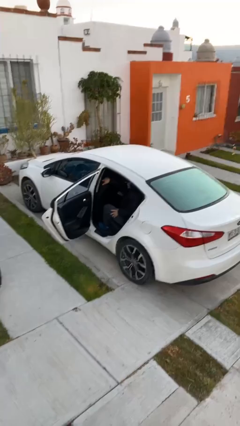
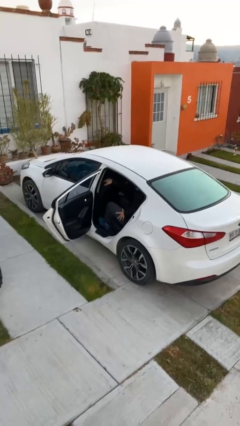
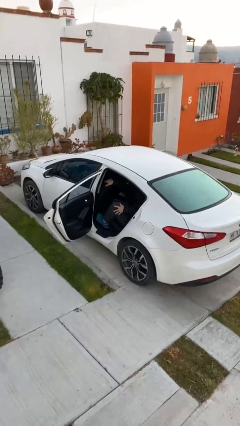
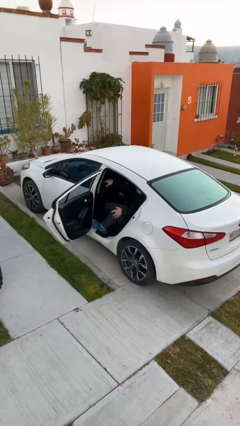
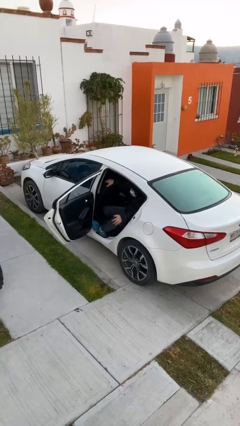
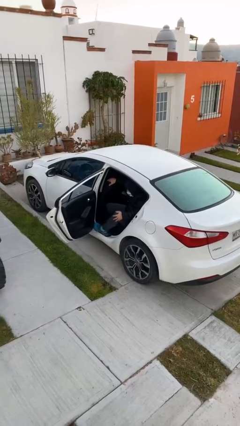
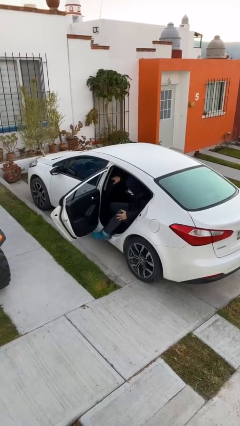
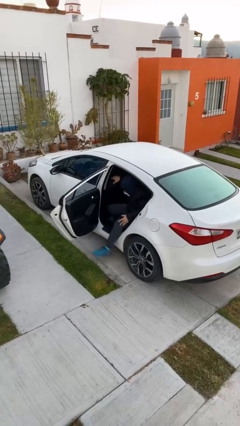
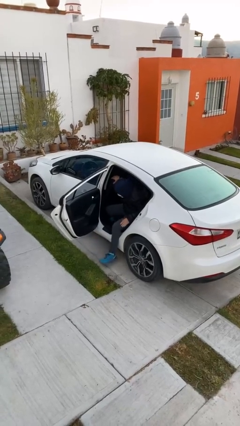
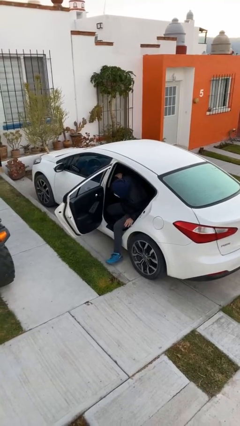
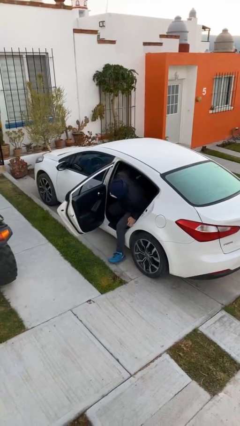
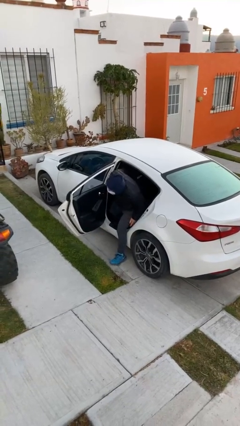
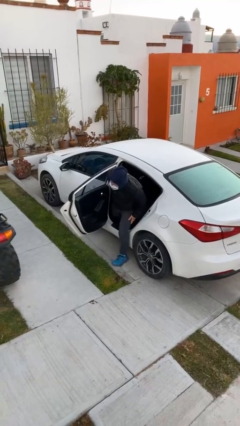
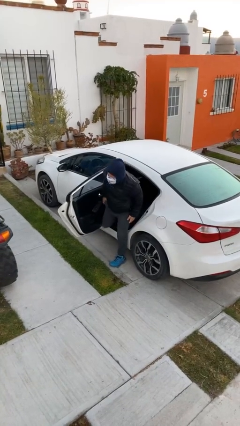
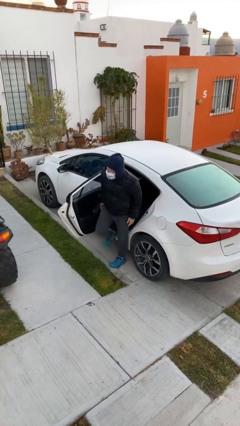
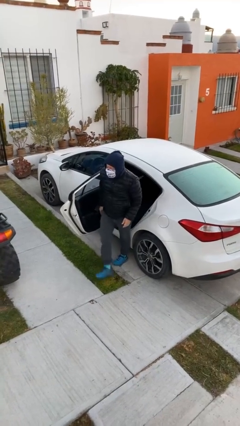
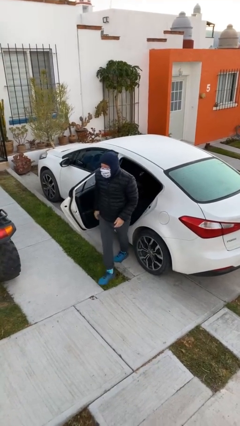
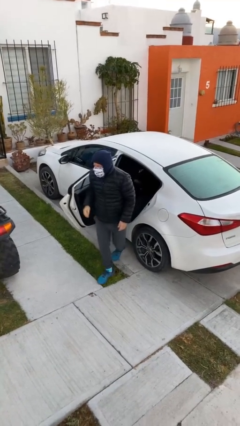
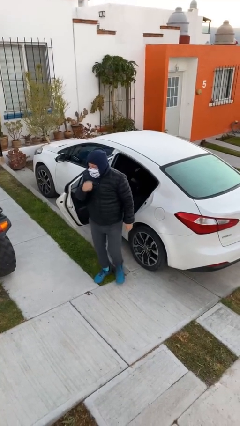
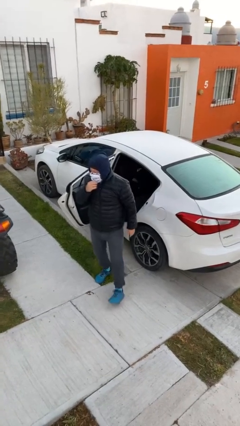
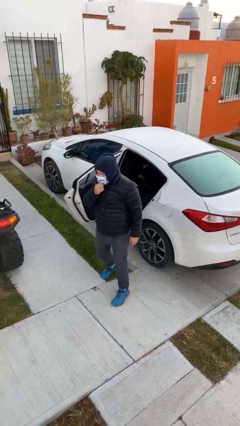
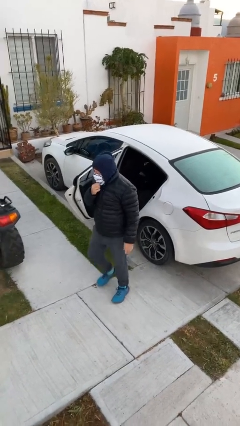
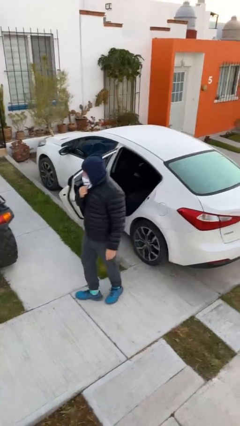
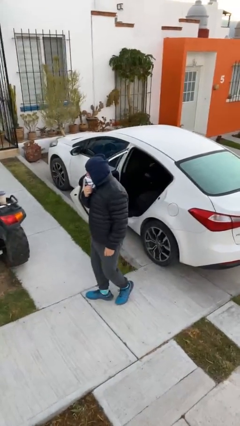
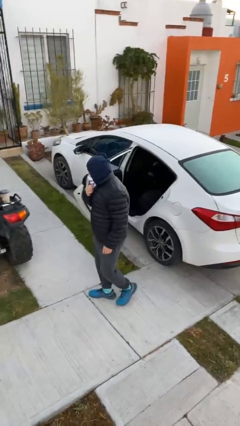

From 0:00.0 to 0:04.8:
person exits car

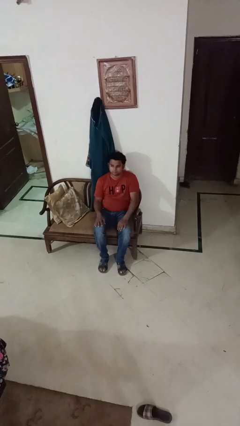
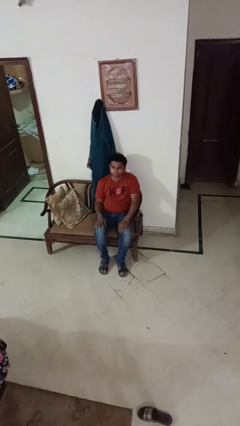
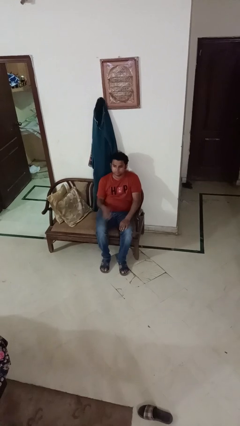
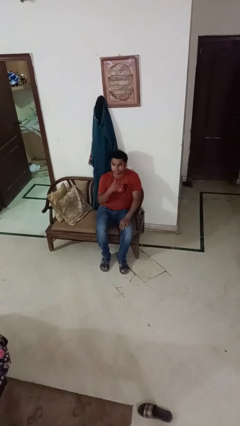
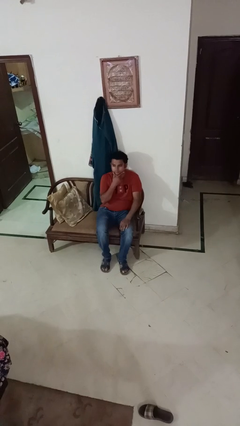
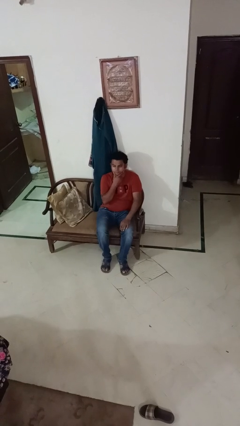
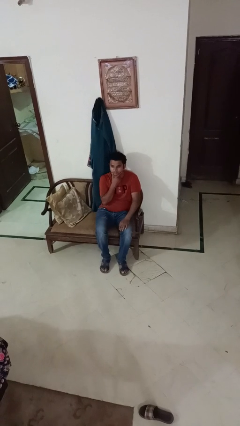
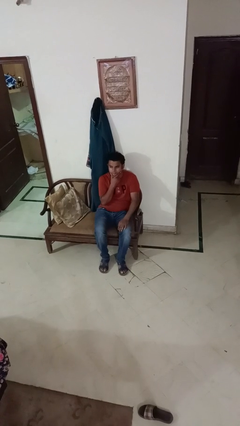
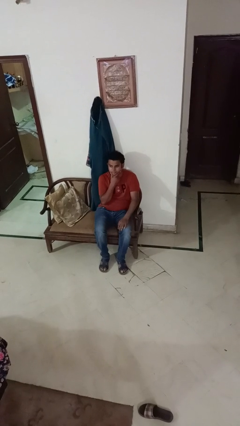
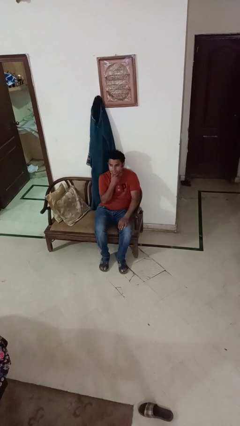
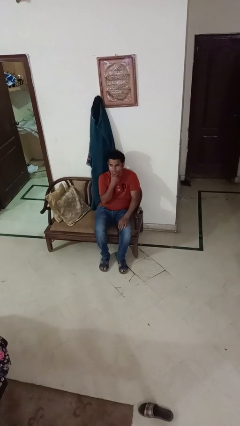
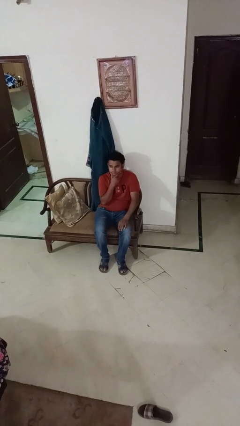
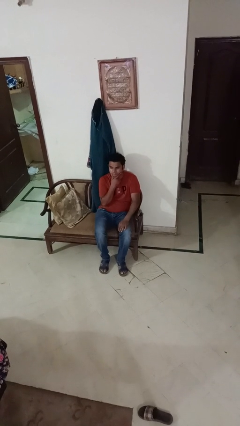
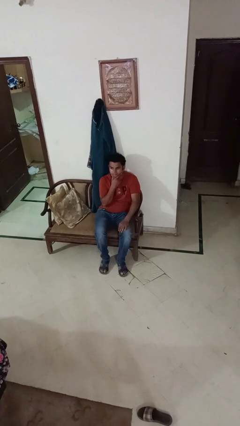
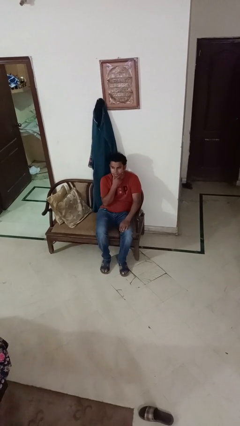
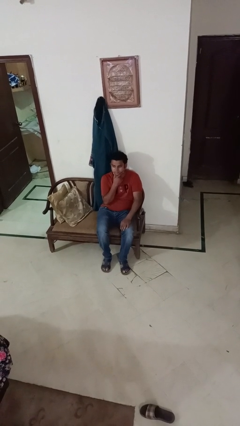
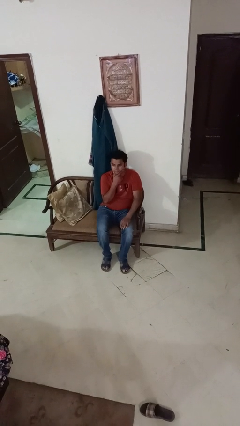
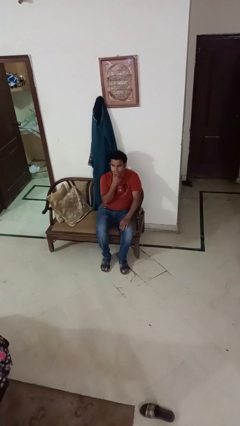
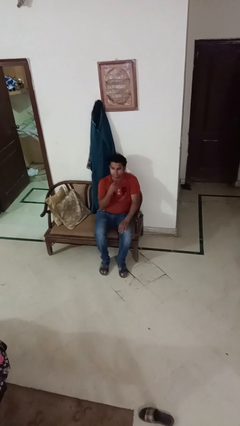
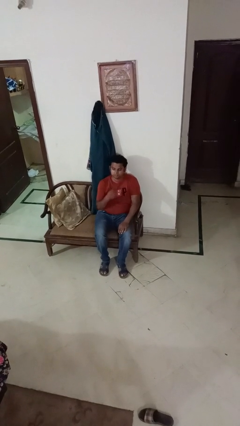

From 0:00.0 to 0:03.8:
person strokes chin

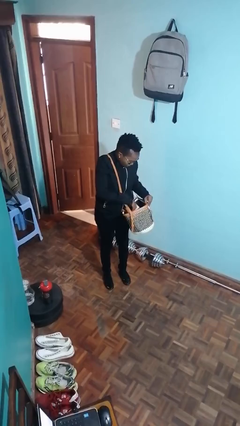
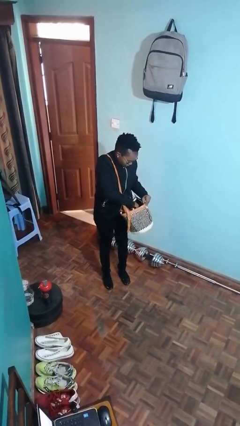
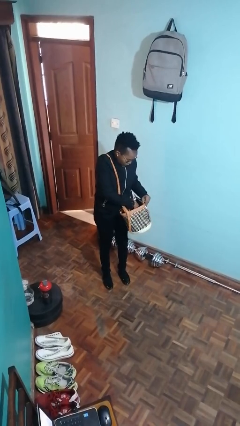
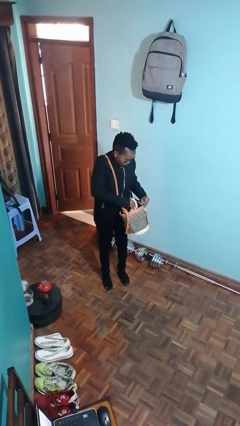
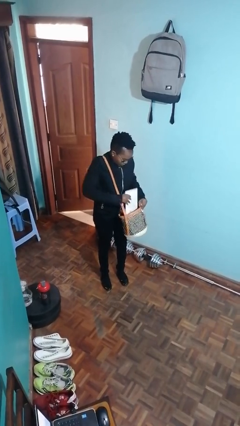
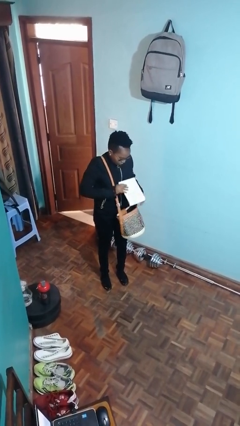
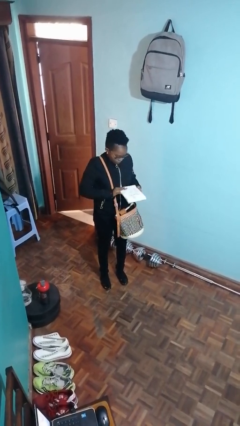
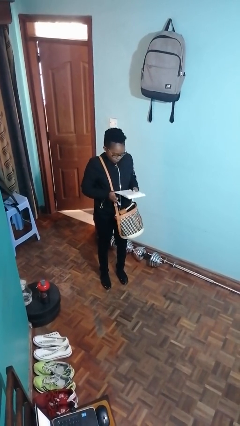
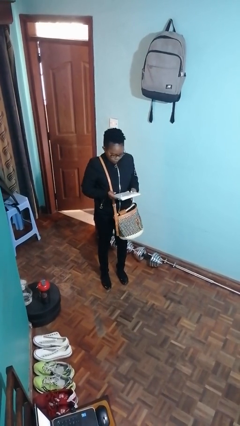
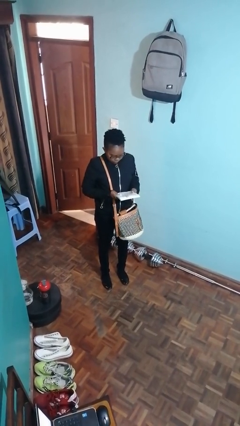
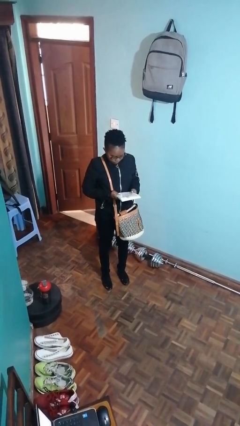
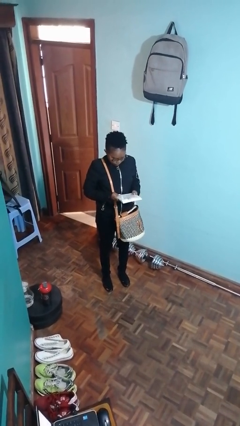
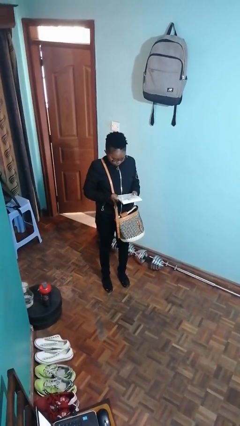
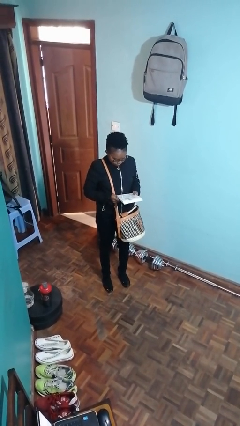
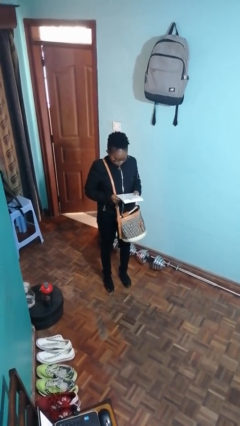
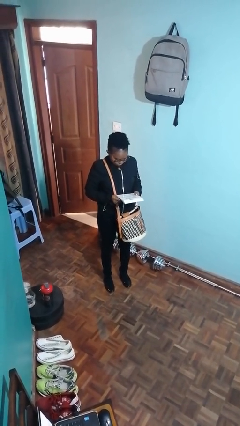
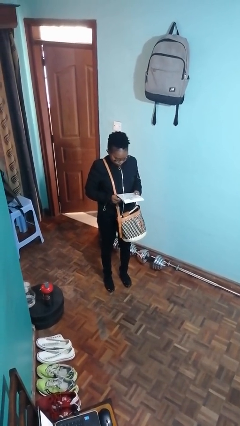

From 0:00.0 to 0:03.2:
person takes object from purse

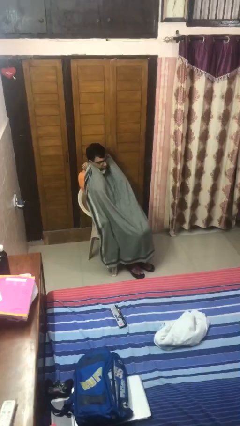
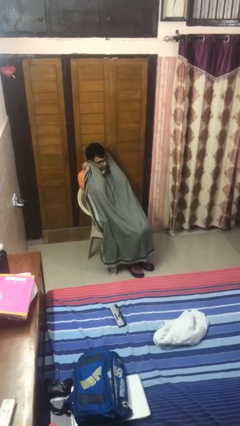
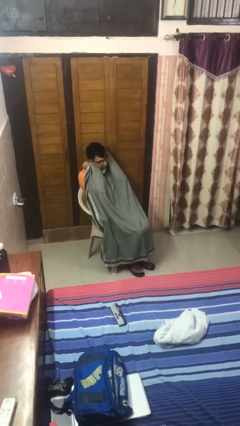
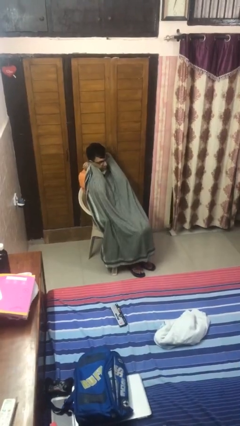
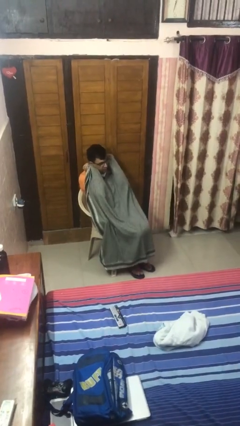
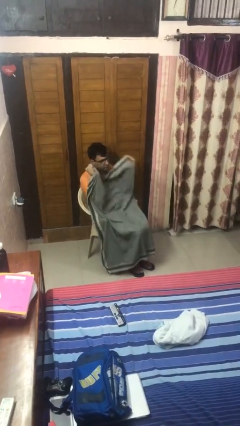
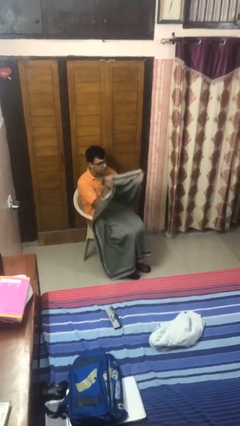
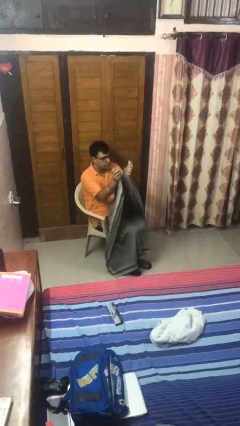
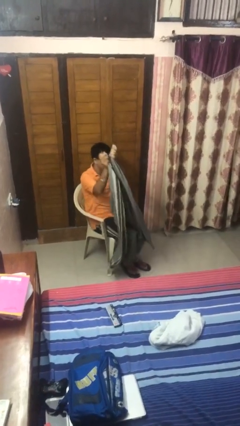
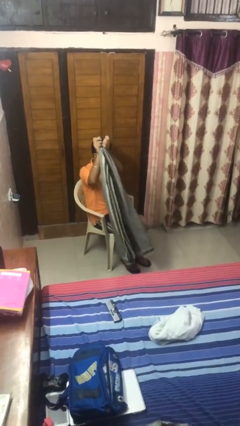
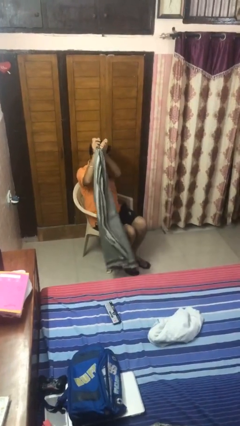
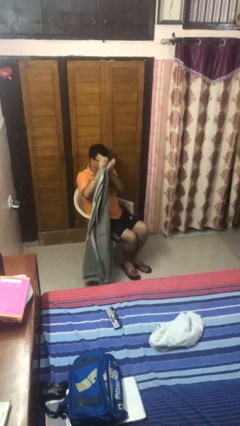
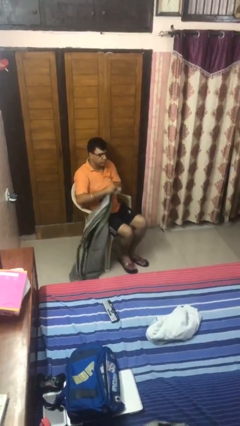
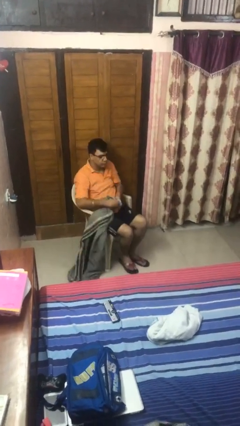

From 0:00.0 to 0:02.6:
person uncovers with blanket

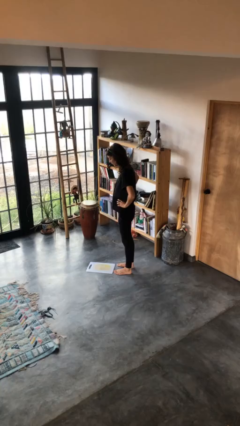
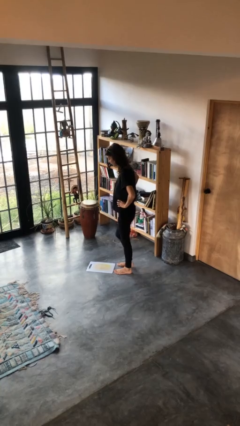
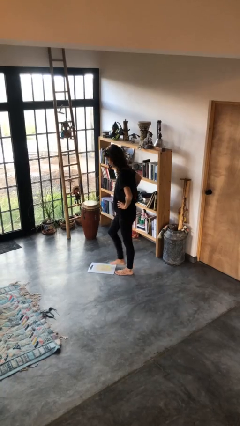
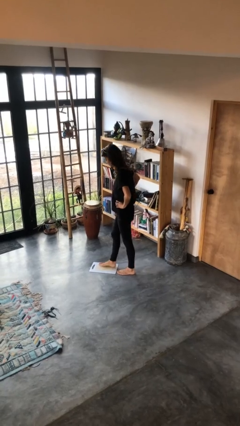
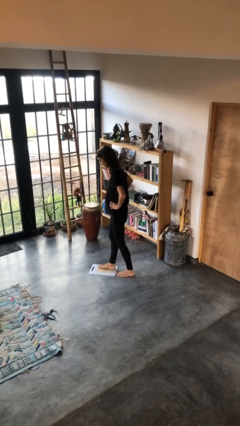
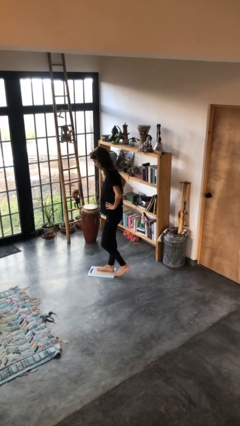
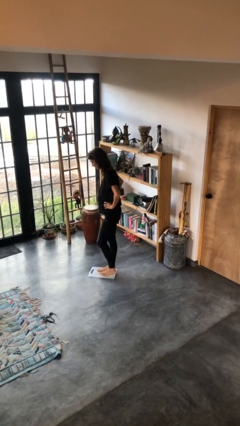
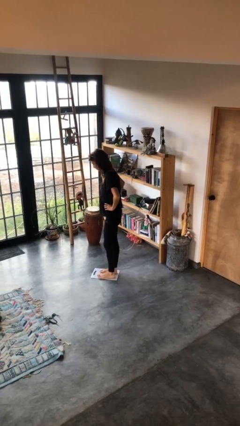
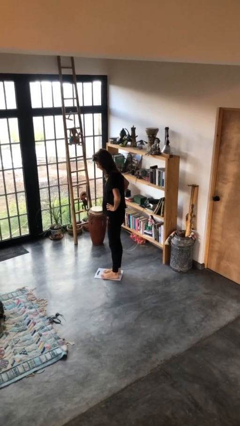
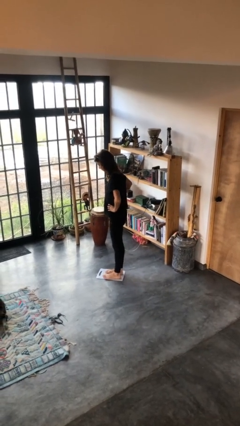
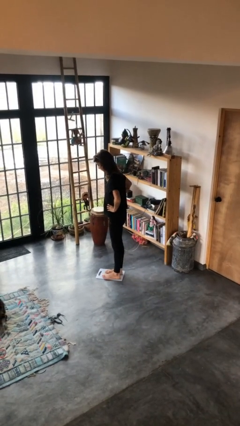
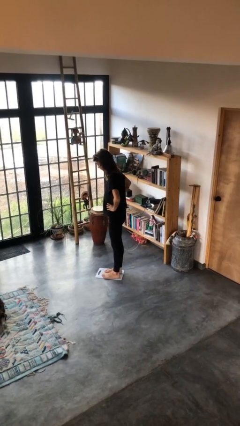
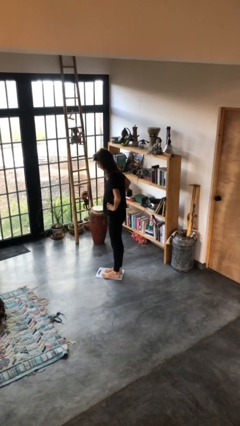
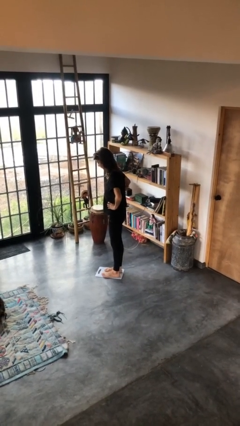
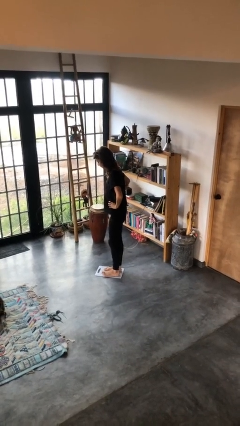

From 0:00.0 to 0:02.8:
person uses bodyweight scale

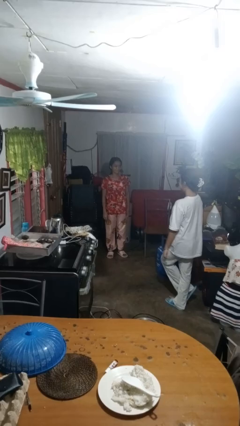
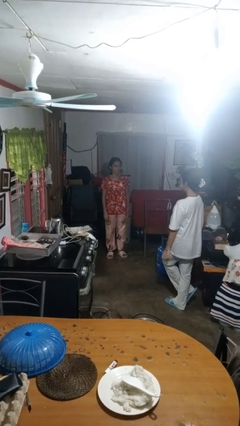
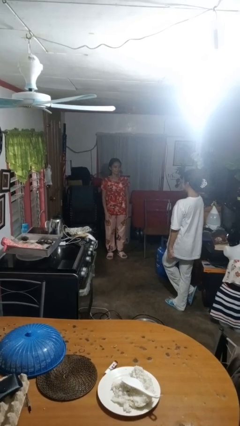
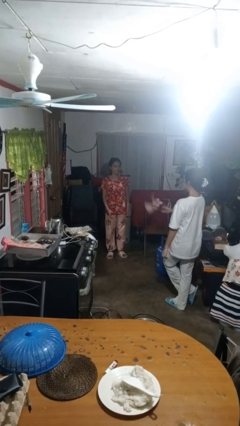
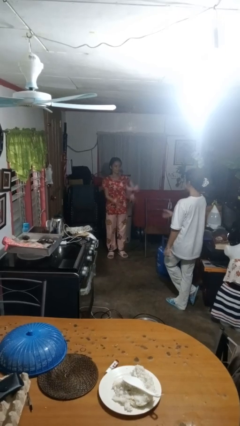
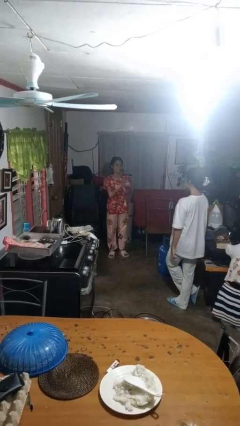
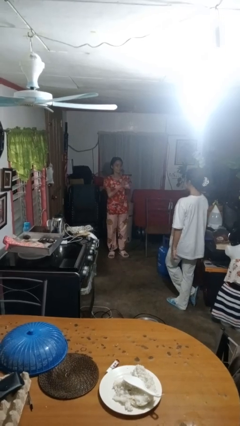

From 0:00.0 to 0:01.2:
person catches object from person
